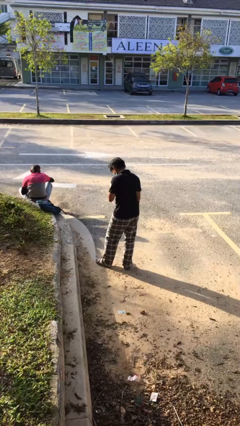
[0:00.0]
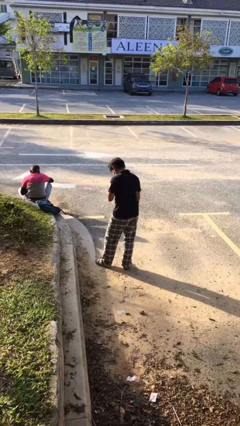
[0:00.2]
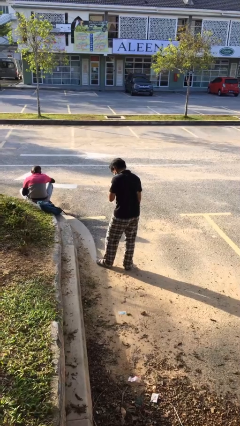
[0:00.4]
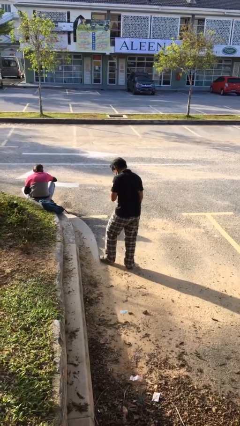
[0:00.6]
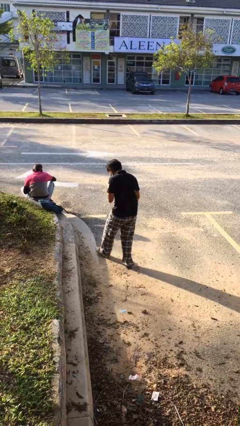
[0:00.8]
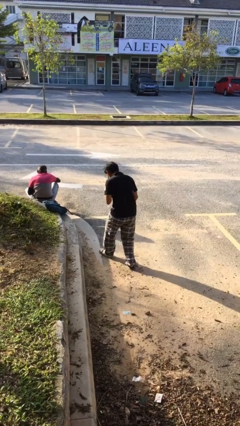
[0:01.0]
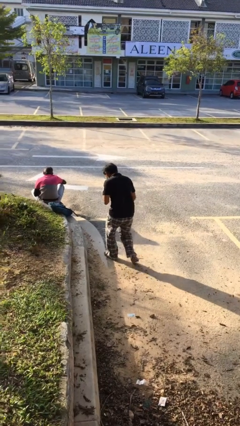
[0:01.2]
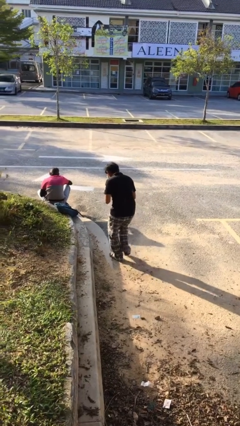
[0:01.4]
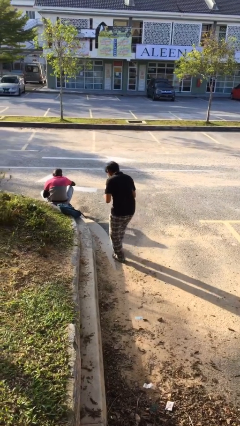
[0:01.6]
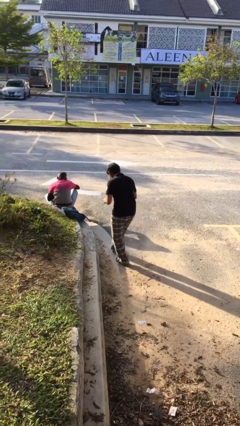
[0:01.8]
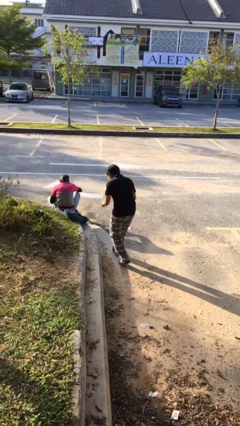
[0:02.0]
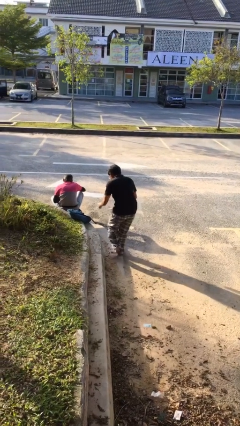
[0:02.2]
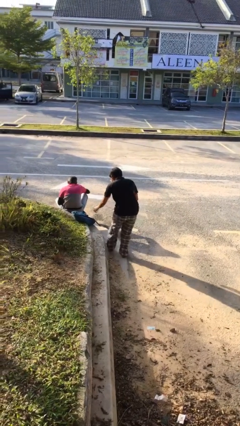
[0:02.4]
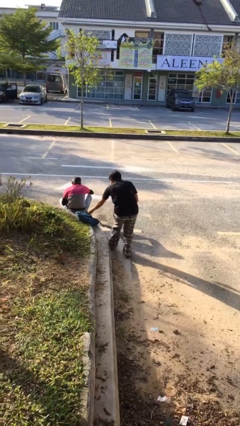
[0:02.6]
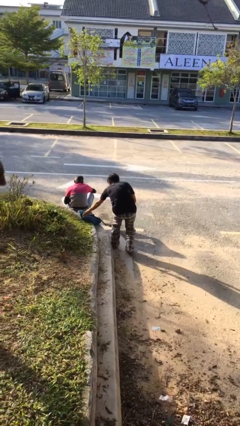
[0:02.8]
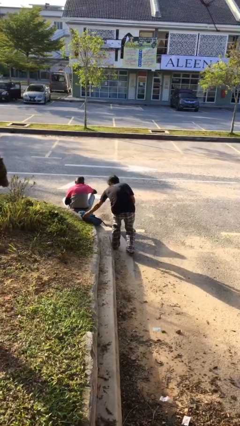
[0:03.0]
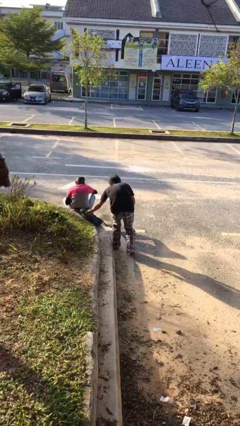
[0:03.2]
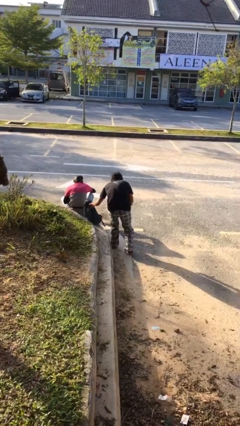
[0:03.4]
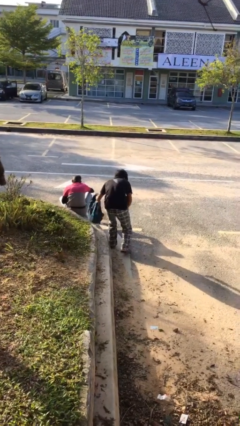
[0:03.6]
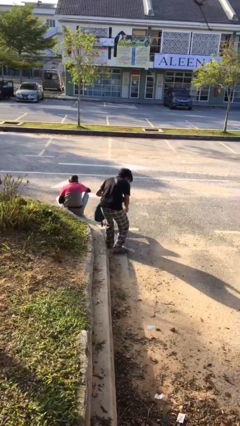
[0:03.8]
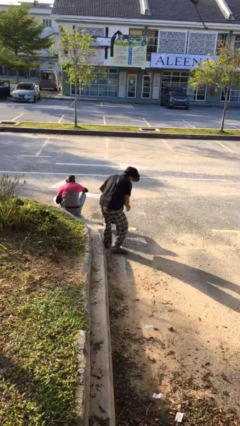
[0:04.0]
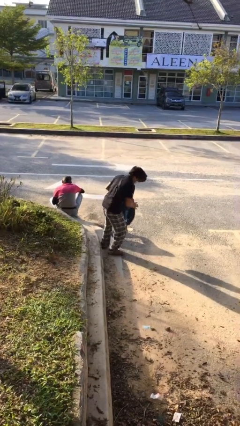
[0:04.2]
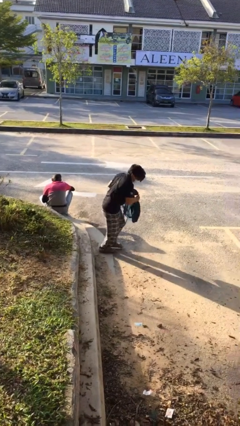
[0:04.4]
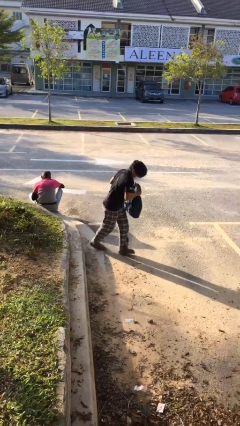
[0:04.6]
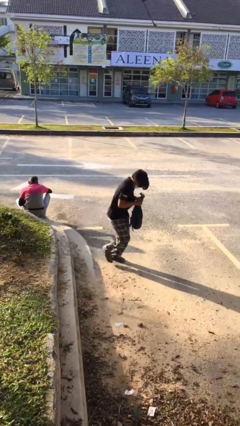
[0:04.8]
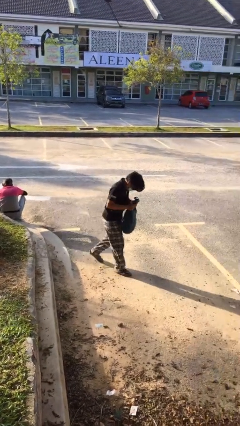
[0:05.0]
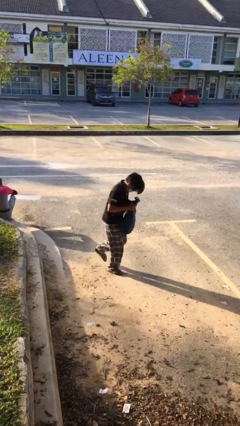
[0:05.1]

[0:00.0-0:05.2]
person steals object from person

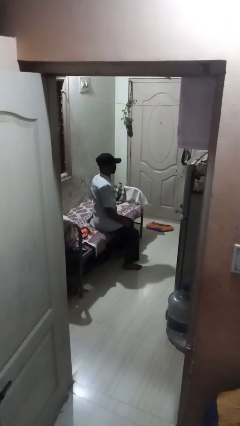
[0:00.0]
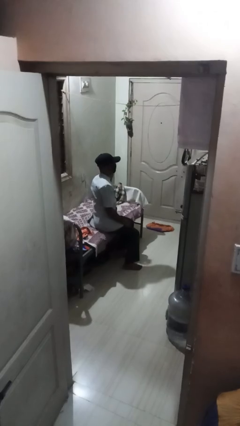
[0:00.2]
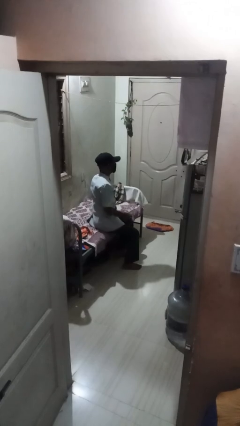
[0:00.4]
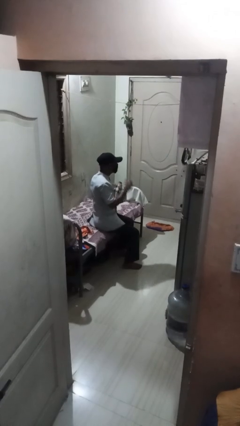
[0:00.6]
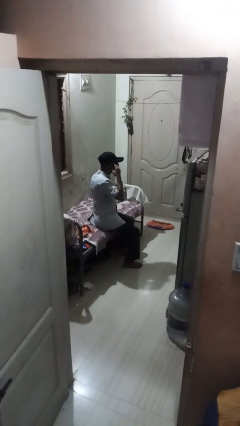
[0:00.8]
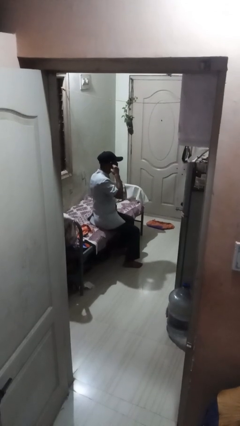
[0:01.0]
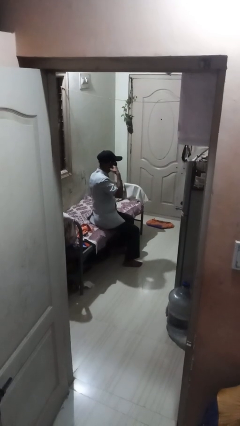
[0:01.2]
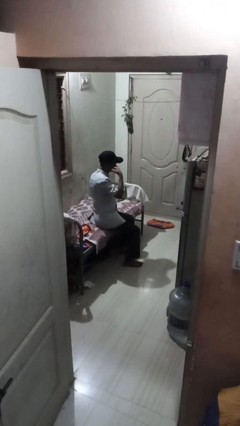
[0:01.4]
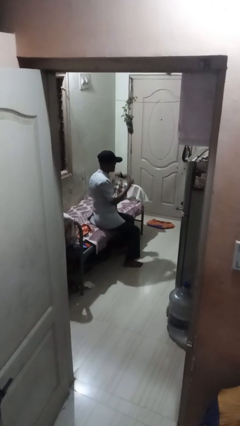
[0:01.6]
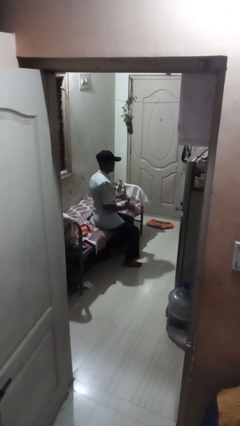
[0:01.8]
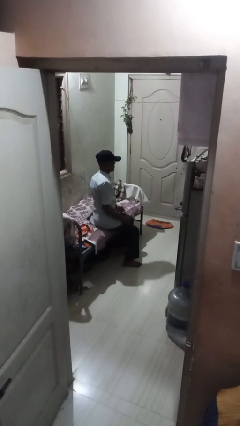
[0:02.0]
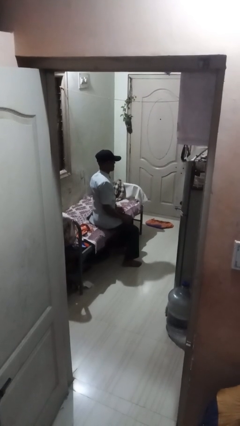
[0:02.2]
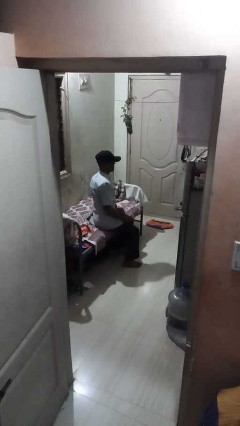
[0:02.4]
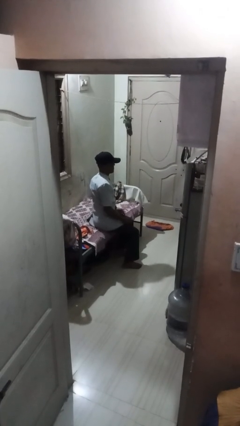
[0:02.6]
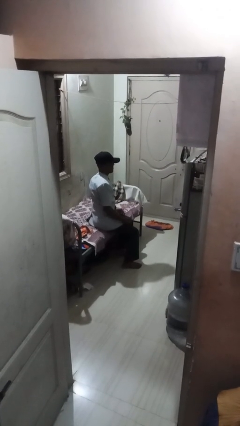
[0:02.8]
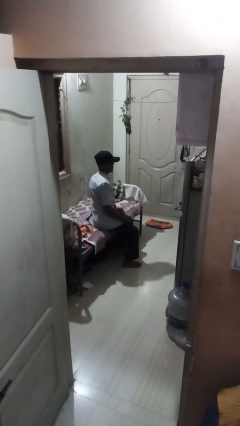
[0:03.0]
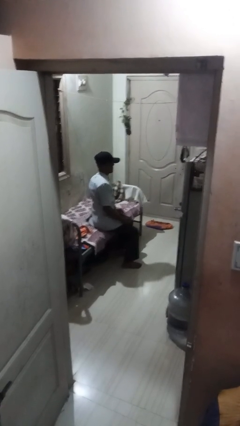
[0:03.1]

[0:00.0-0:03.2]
person takes off facemask

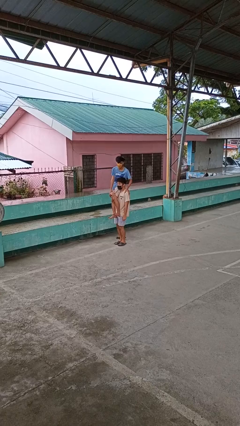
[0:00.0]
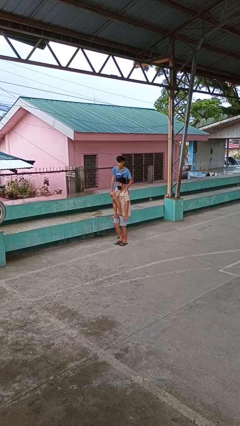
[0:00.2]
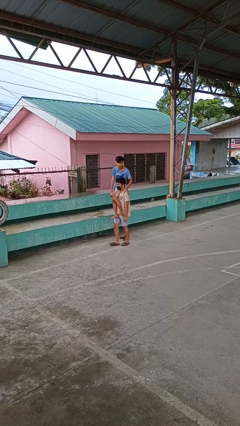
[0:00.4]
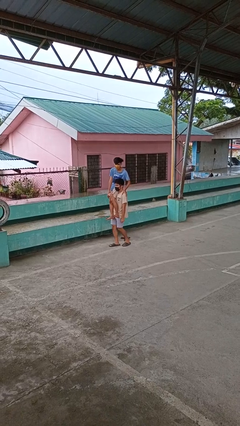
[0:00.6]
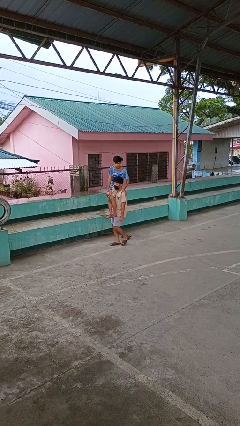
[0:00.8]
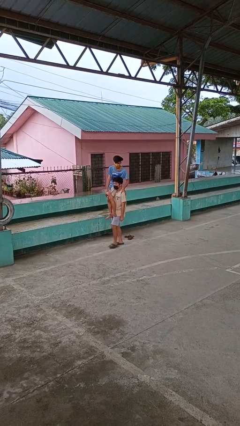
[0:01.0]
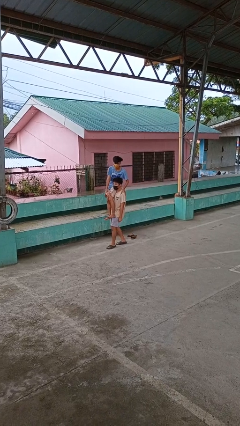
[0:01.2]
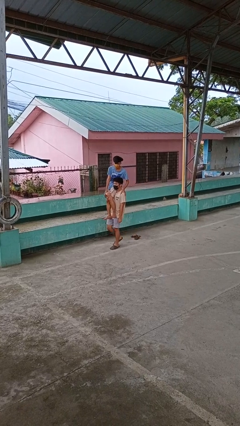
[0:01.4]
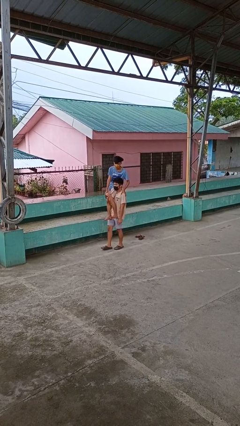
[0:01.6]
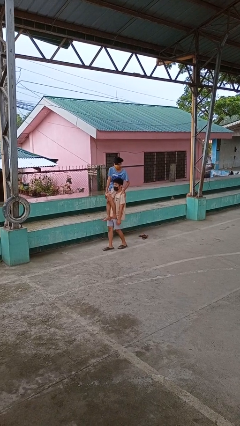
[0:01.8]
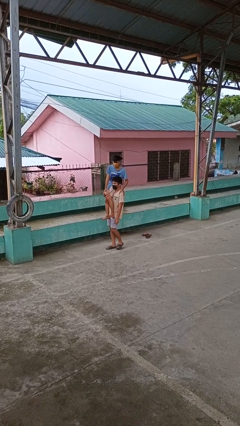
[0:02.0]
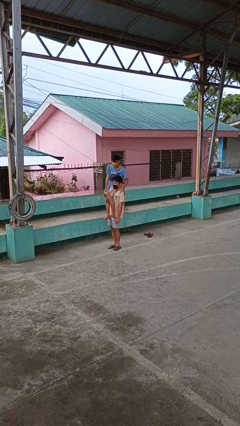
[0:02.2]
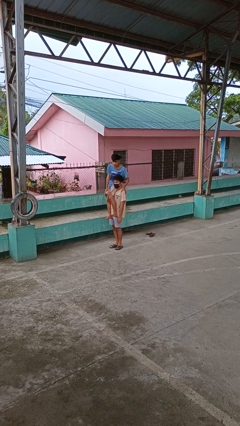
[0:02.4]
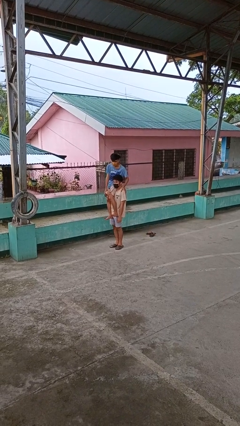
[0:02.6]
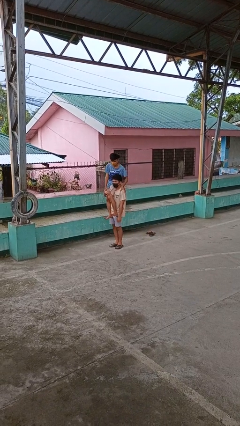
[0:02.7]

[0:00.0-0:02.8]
person carries person on shoulders

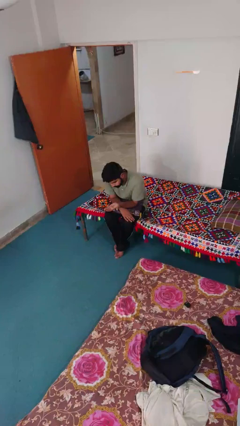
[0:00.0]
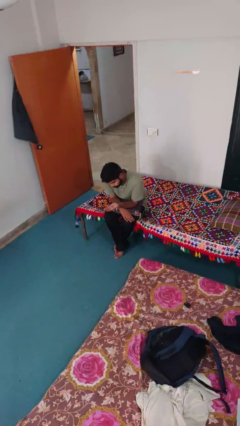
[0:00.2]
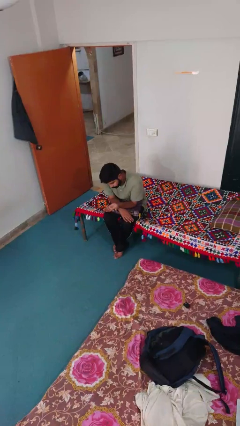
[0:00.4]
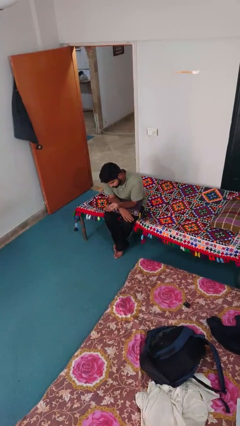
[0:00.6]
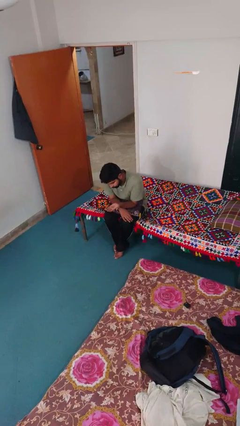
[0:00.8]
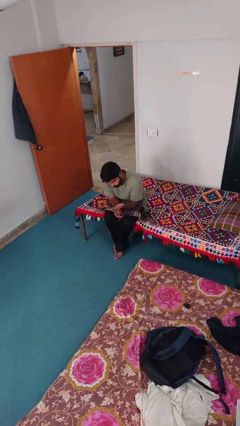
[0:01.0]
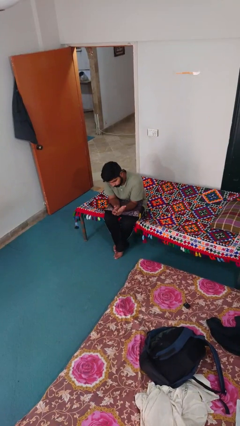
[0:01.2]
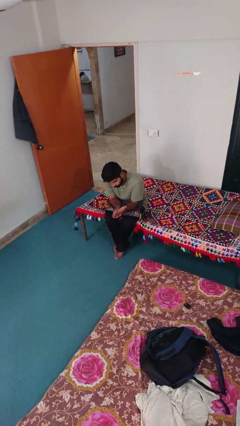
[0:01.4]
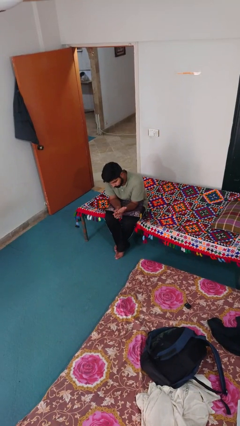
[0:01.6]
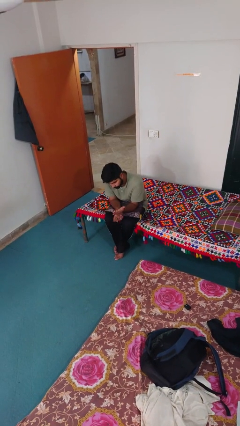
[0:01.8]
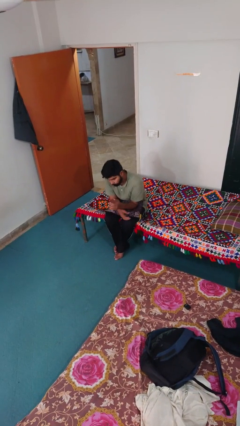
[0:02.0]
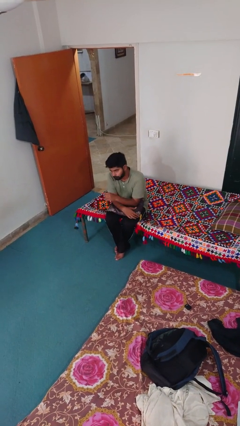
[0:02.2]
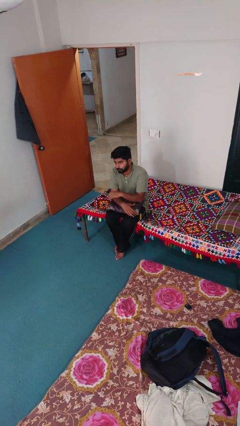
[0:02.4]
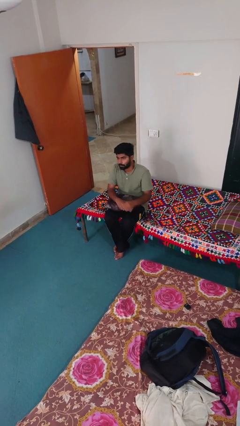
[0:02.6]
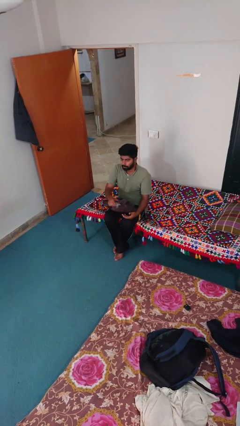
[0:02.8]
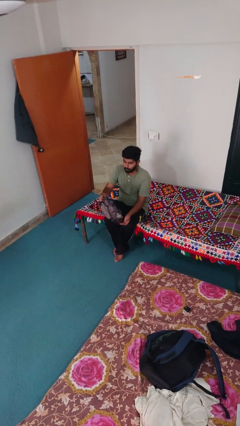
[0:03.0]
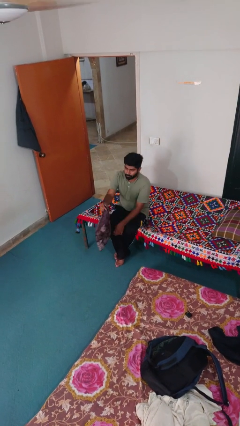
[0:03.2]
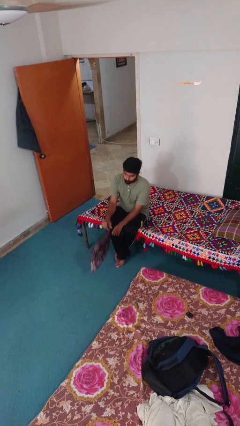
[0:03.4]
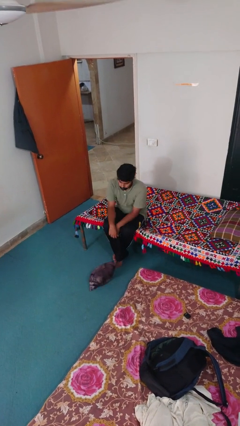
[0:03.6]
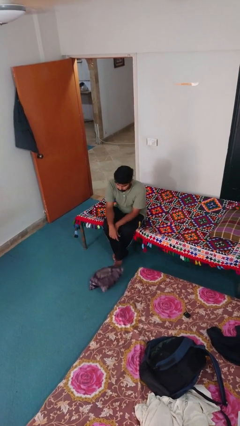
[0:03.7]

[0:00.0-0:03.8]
person drops object

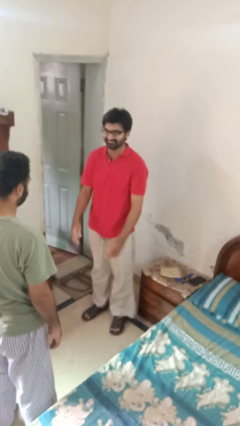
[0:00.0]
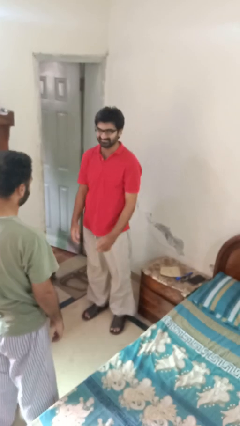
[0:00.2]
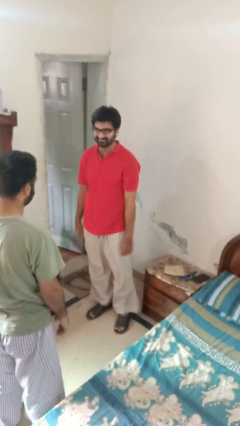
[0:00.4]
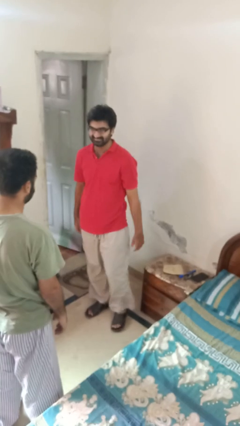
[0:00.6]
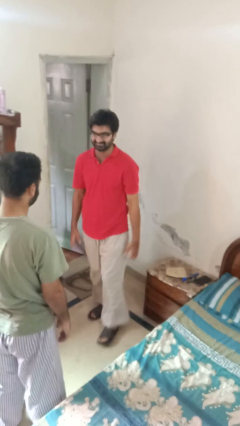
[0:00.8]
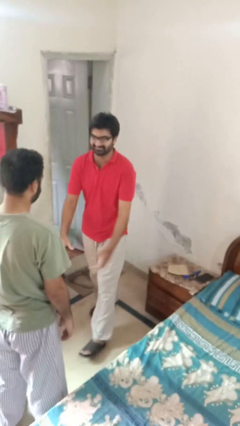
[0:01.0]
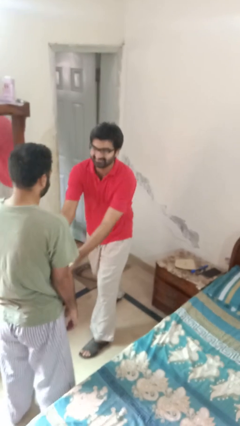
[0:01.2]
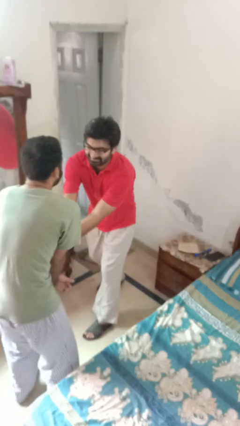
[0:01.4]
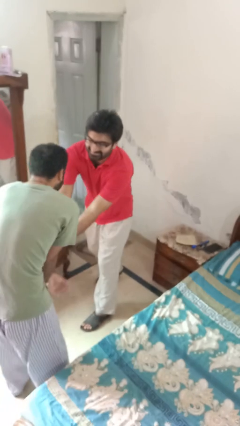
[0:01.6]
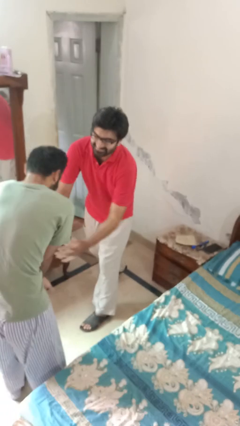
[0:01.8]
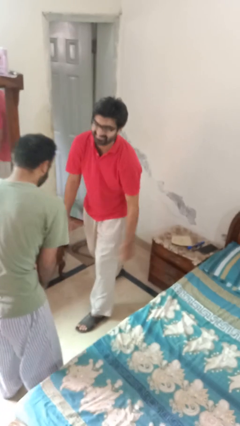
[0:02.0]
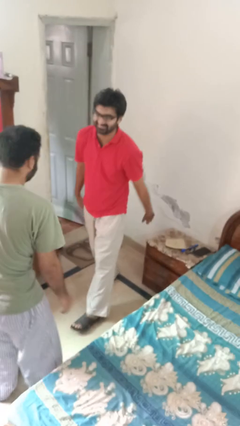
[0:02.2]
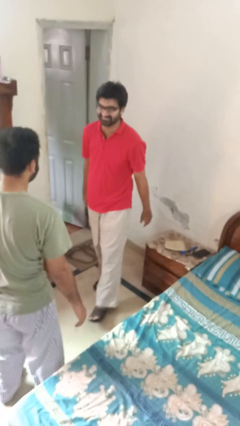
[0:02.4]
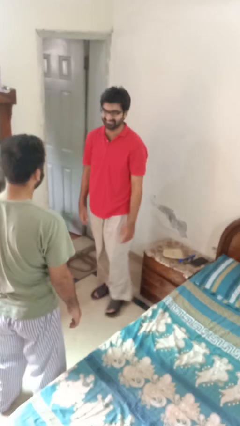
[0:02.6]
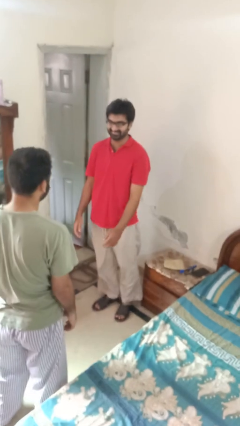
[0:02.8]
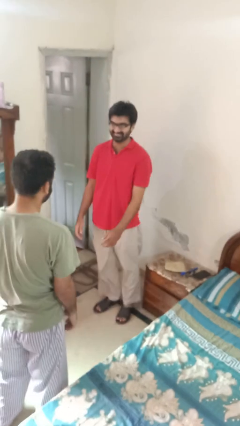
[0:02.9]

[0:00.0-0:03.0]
person tickles person
